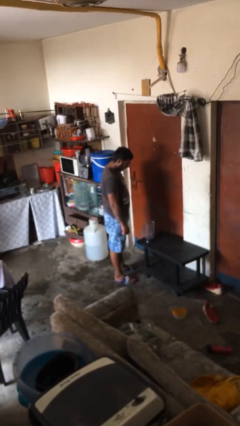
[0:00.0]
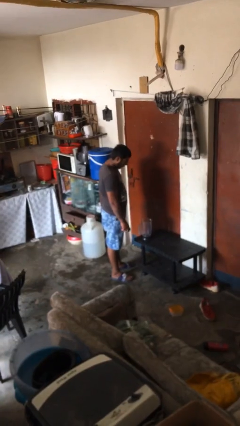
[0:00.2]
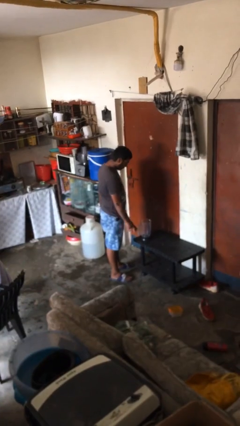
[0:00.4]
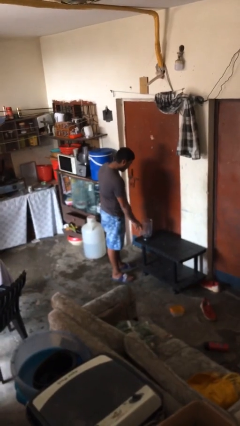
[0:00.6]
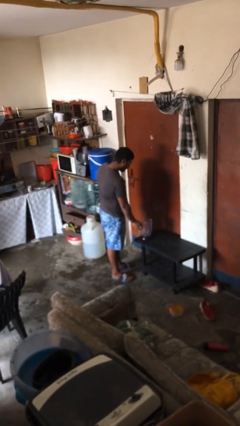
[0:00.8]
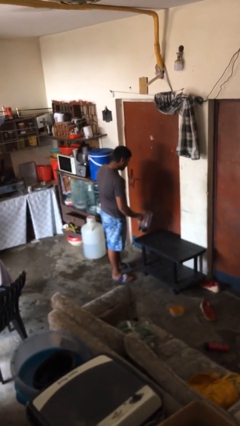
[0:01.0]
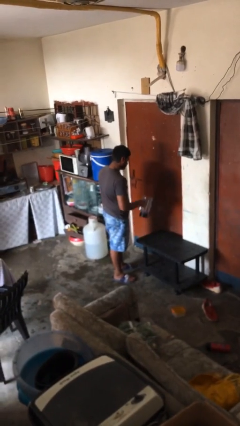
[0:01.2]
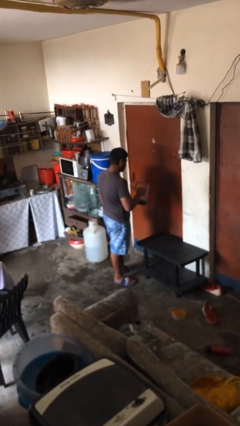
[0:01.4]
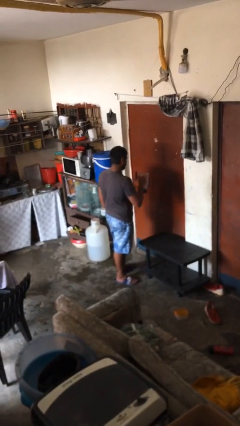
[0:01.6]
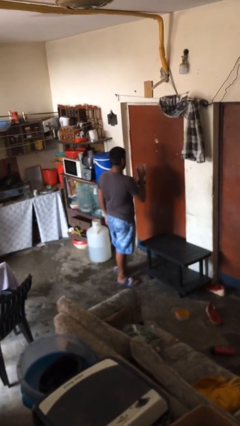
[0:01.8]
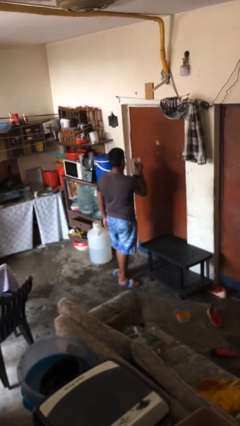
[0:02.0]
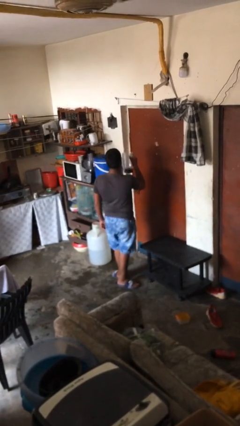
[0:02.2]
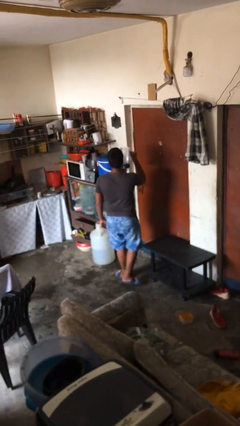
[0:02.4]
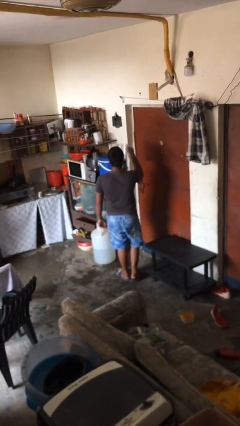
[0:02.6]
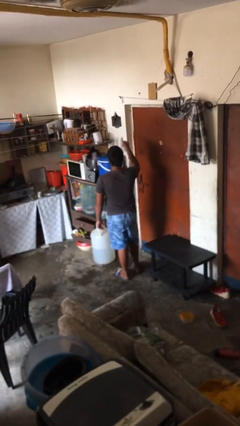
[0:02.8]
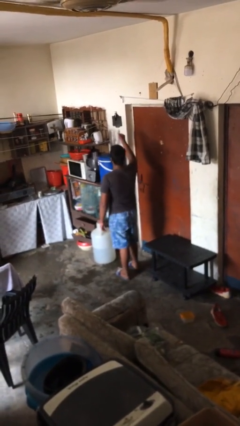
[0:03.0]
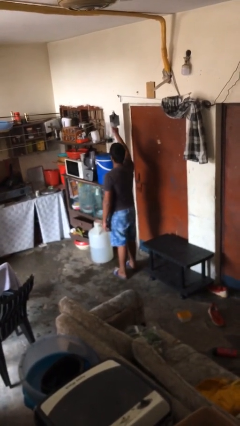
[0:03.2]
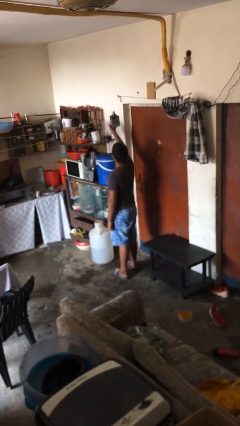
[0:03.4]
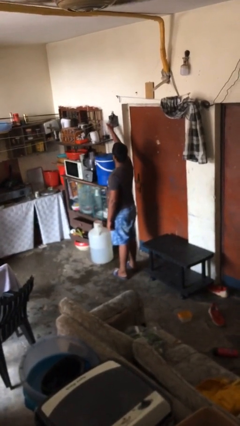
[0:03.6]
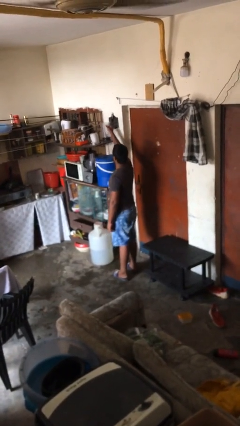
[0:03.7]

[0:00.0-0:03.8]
person picks up object from table

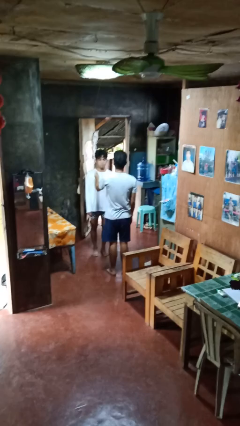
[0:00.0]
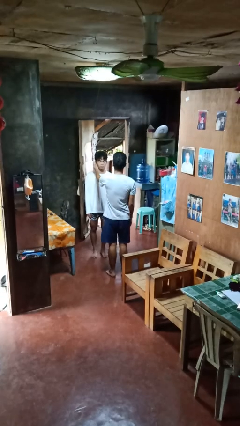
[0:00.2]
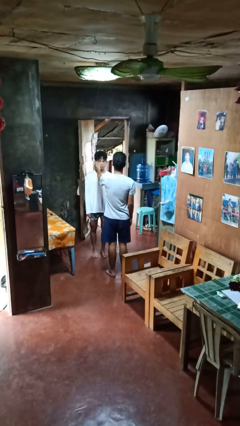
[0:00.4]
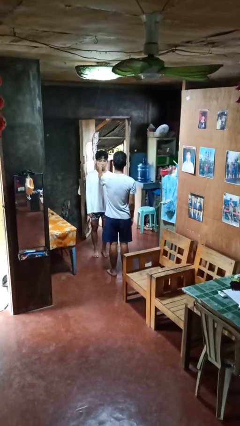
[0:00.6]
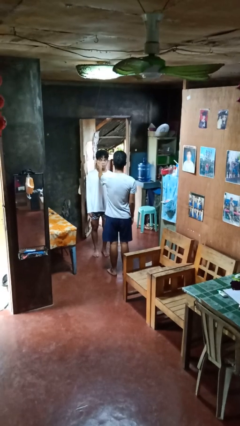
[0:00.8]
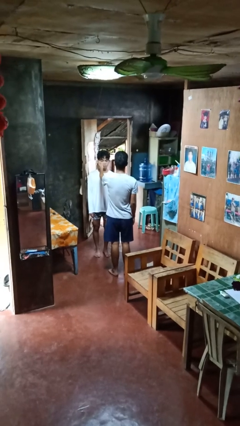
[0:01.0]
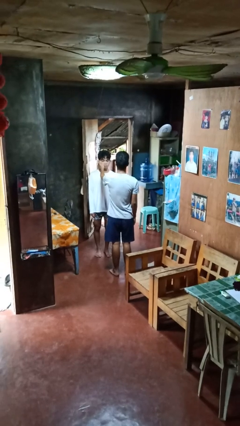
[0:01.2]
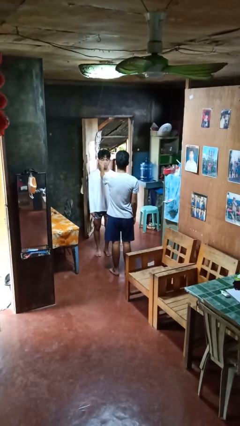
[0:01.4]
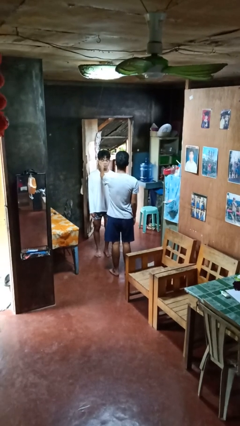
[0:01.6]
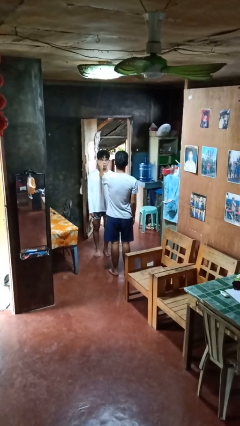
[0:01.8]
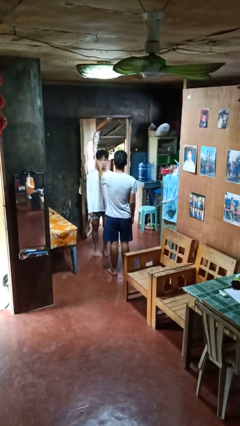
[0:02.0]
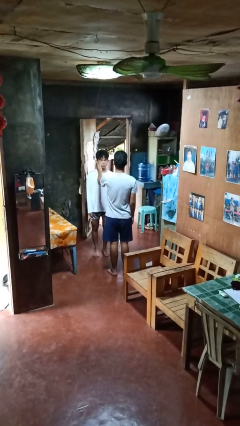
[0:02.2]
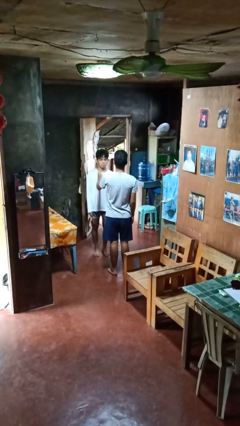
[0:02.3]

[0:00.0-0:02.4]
person touches face of person

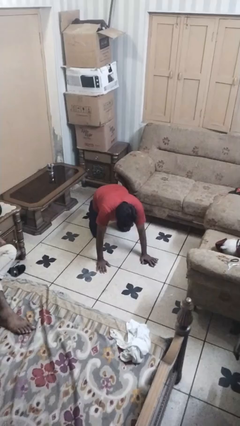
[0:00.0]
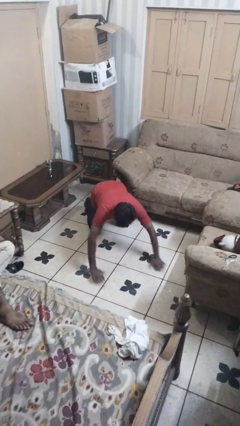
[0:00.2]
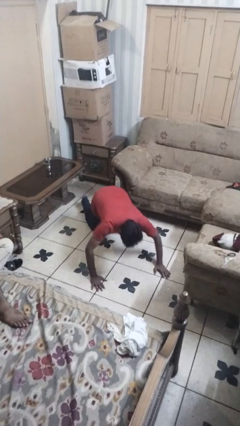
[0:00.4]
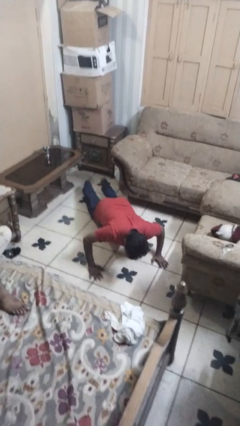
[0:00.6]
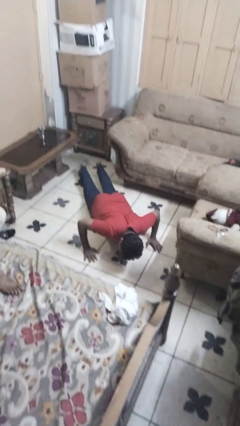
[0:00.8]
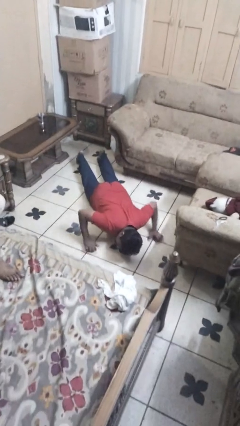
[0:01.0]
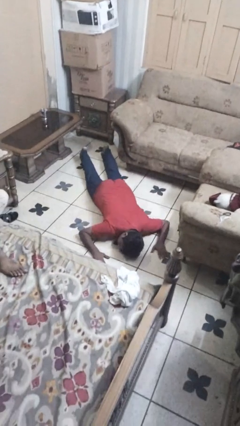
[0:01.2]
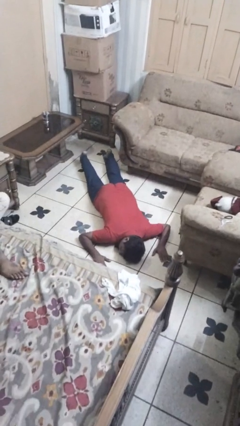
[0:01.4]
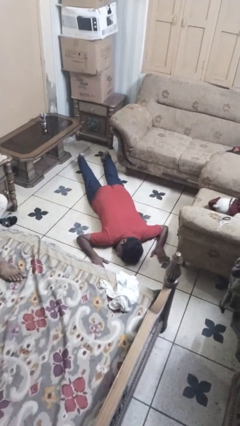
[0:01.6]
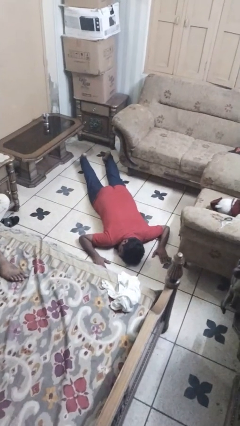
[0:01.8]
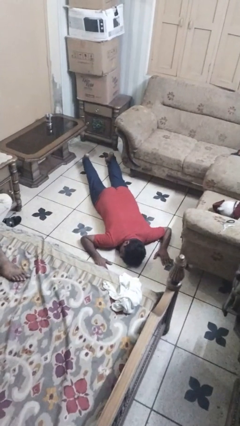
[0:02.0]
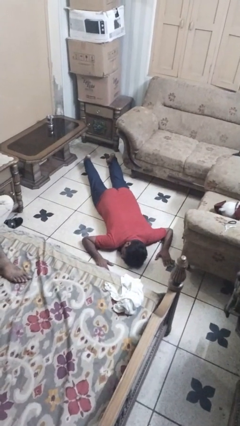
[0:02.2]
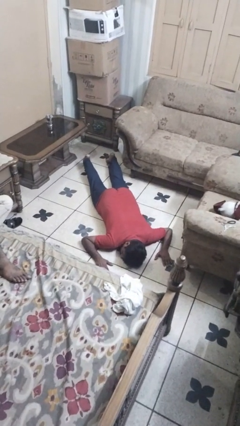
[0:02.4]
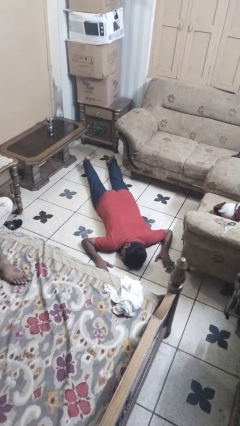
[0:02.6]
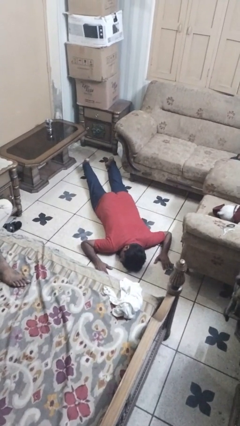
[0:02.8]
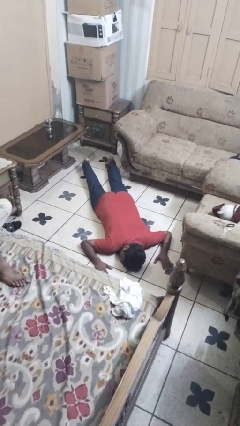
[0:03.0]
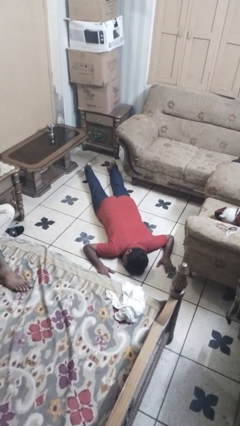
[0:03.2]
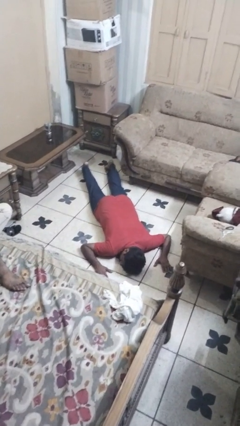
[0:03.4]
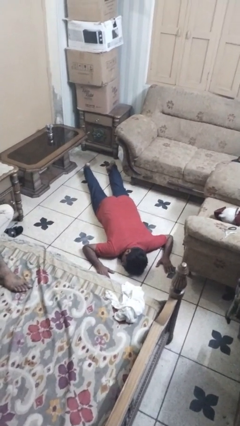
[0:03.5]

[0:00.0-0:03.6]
person lies down on floor

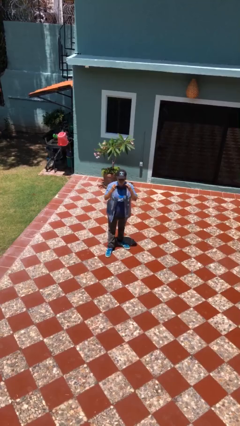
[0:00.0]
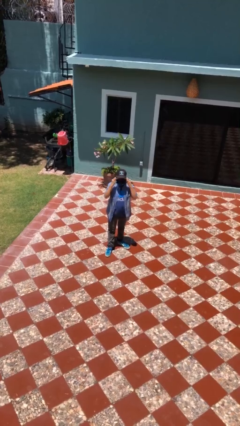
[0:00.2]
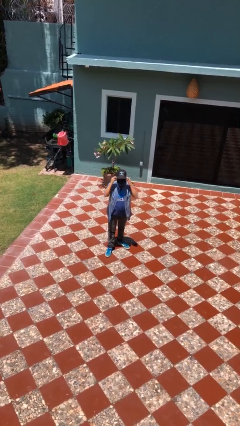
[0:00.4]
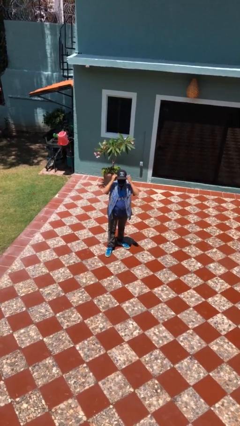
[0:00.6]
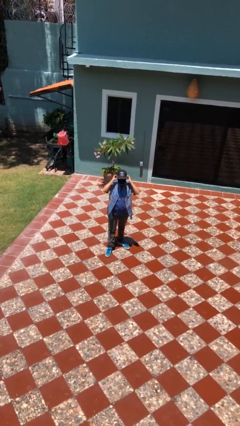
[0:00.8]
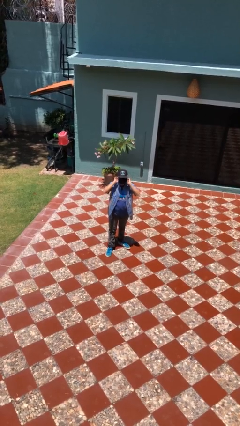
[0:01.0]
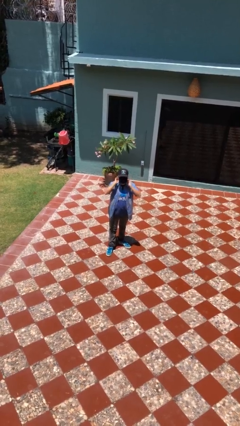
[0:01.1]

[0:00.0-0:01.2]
person puts on facemask

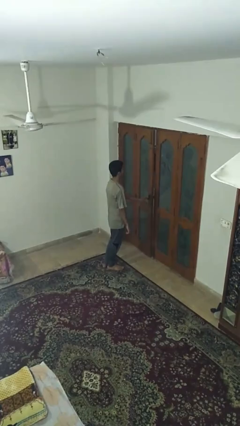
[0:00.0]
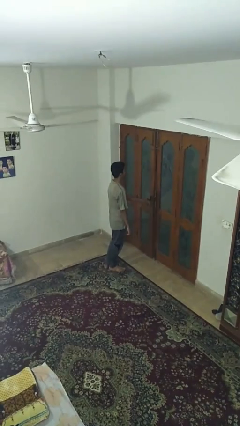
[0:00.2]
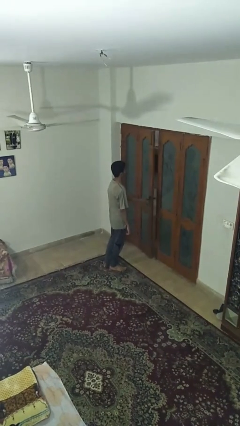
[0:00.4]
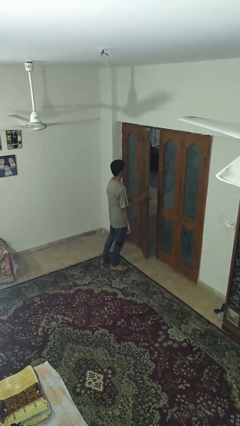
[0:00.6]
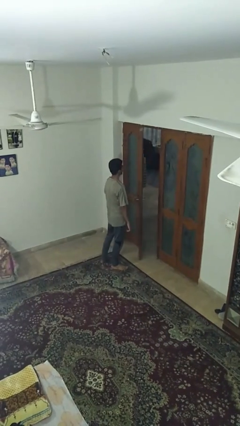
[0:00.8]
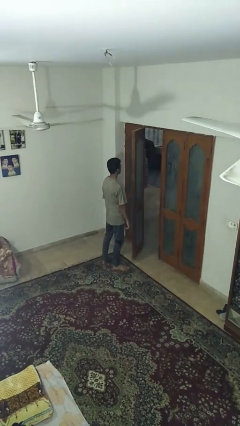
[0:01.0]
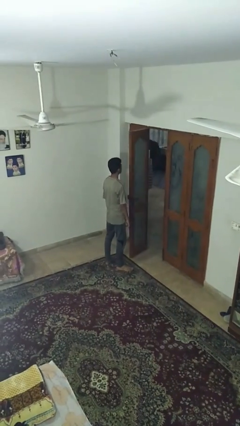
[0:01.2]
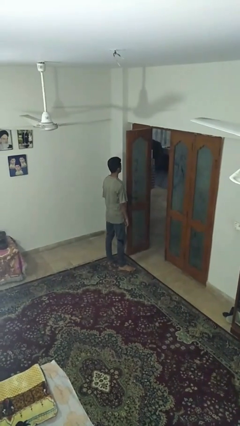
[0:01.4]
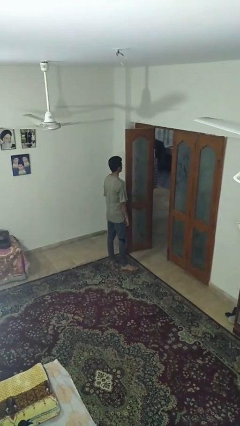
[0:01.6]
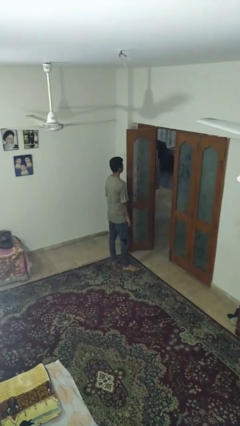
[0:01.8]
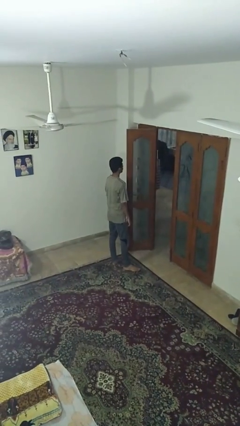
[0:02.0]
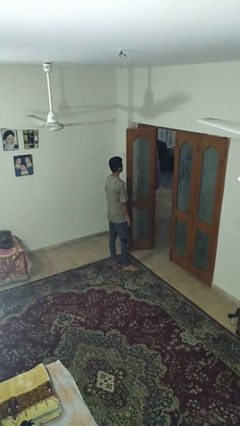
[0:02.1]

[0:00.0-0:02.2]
person opens facility door

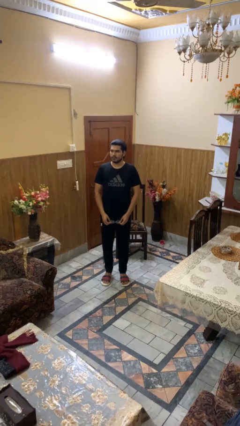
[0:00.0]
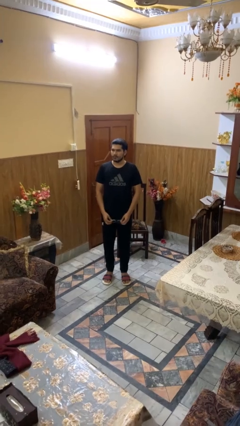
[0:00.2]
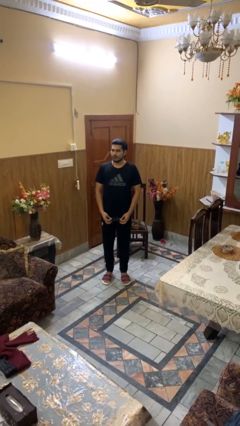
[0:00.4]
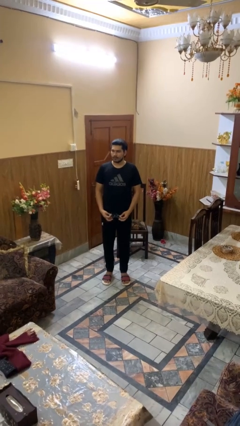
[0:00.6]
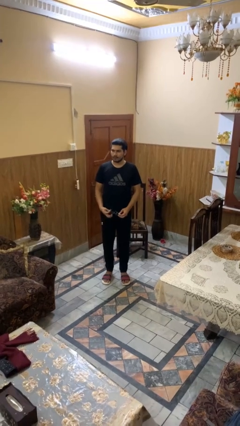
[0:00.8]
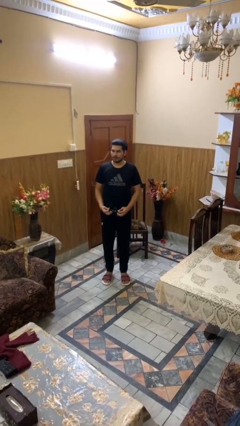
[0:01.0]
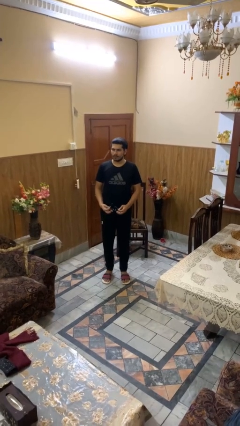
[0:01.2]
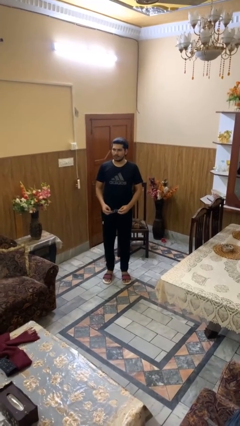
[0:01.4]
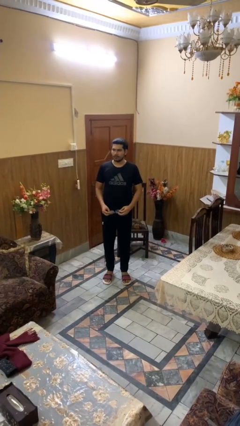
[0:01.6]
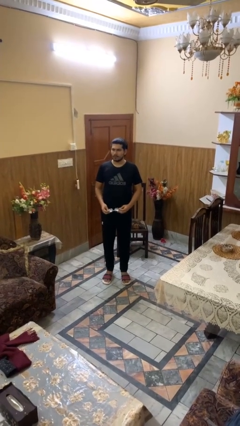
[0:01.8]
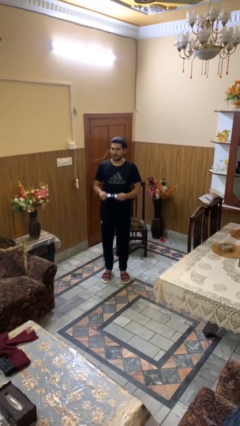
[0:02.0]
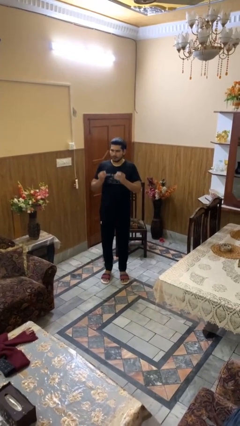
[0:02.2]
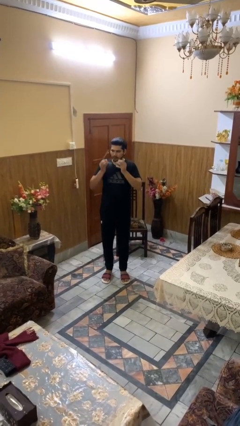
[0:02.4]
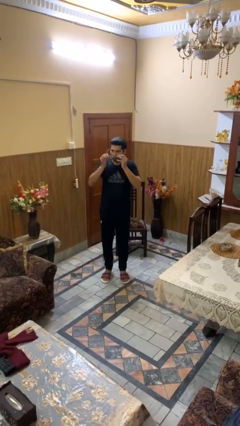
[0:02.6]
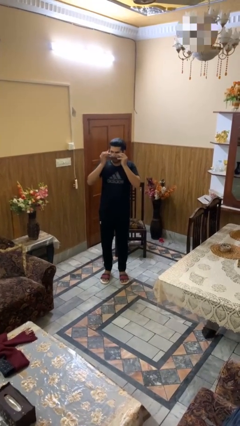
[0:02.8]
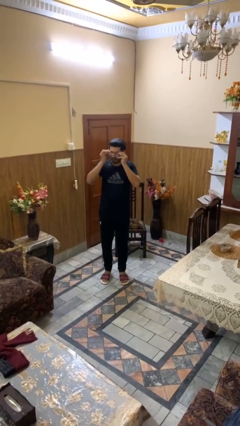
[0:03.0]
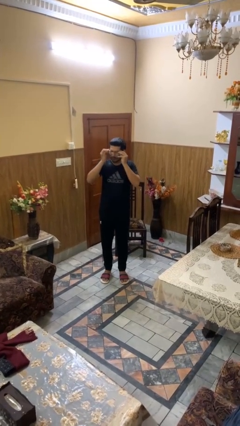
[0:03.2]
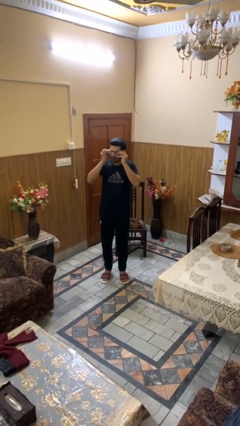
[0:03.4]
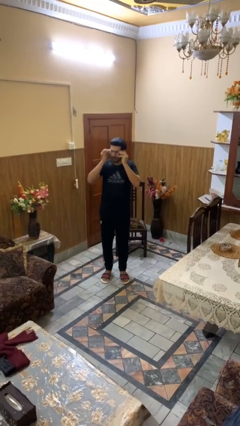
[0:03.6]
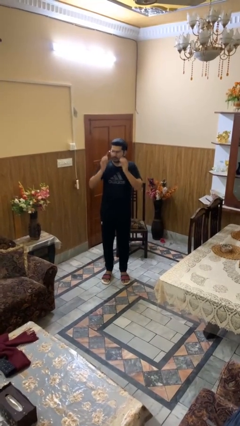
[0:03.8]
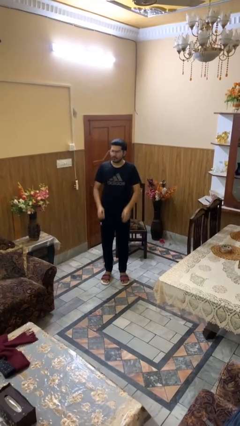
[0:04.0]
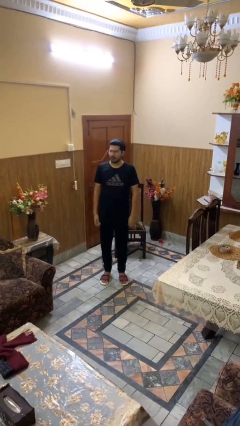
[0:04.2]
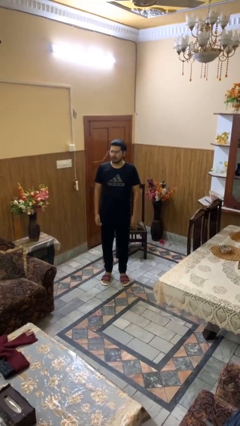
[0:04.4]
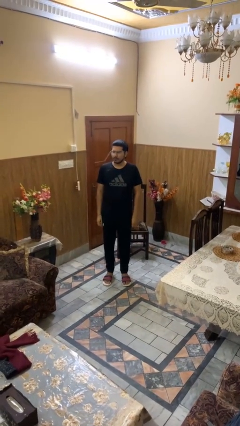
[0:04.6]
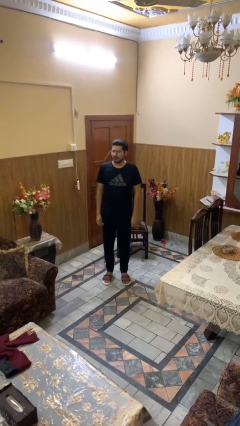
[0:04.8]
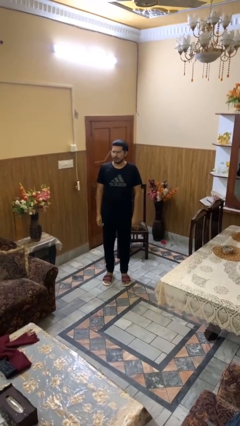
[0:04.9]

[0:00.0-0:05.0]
person puts on glasses
